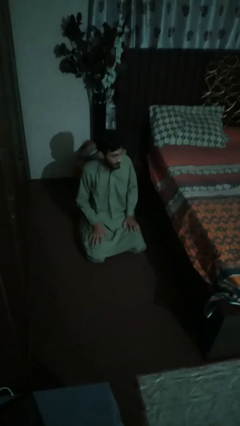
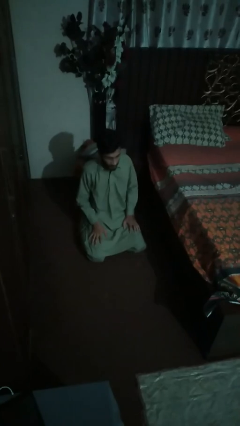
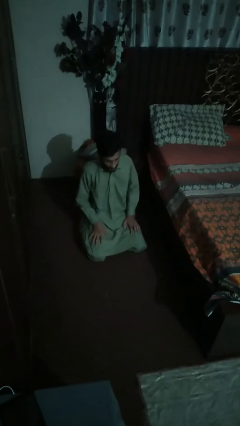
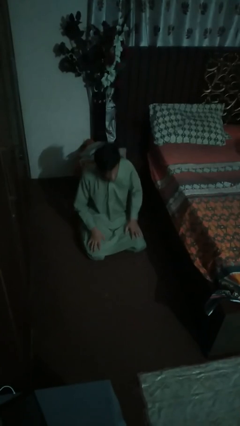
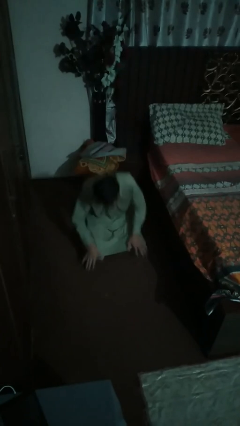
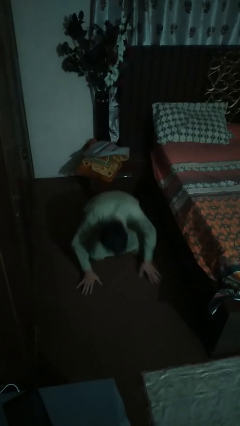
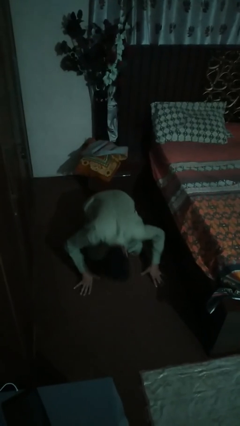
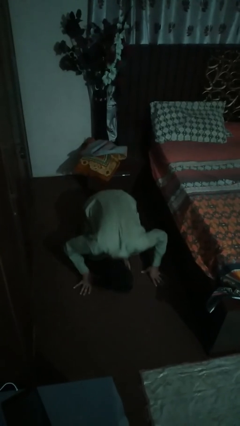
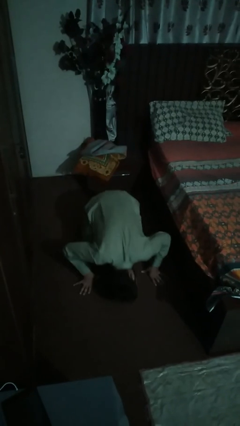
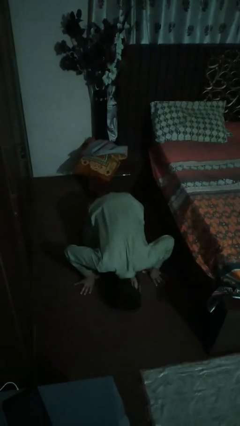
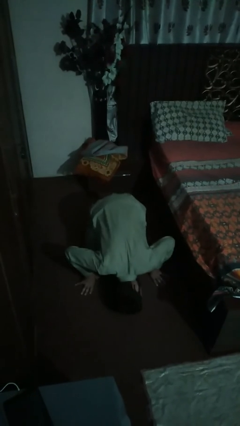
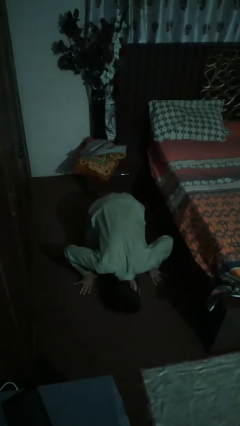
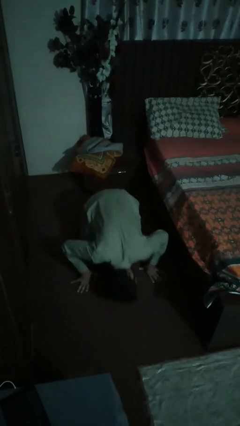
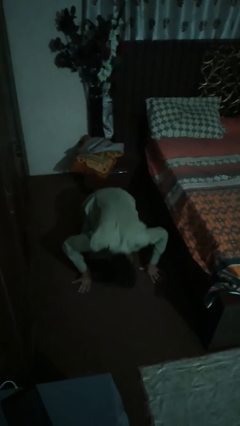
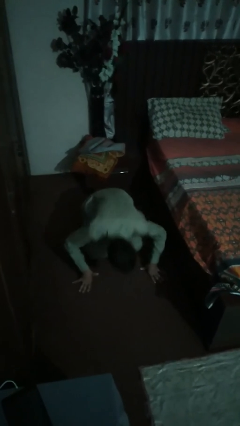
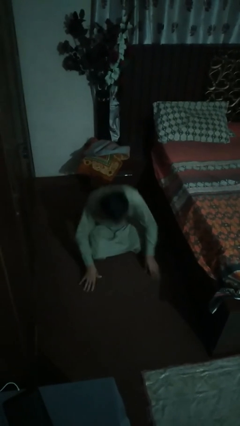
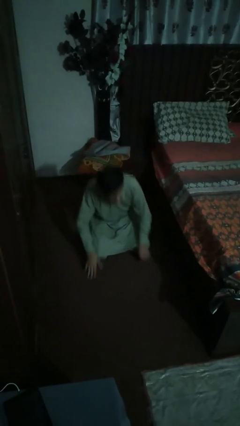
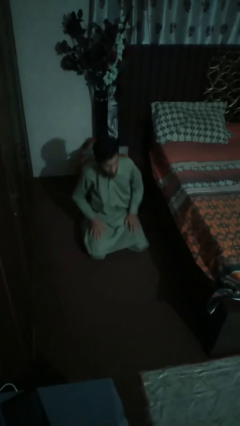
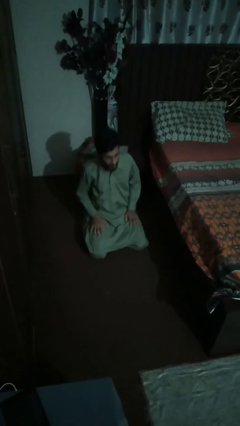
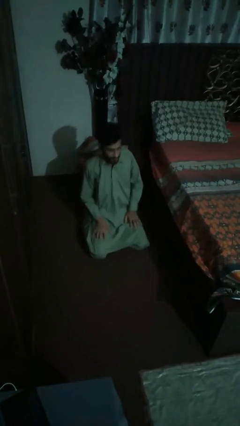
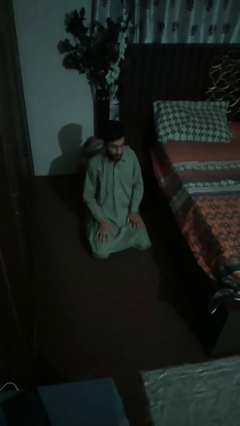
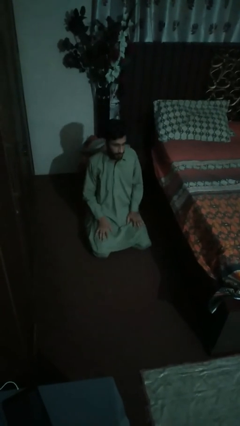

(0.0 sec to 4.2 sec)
person searches under bed

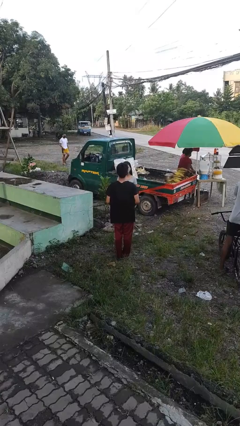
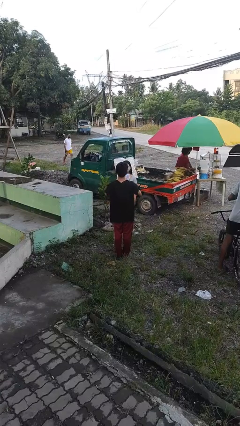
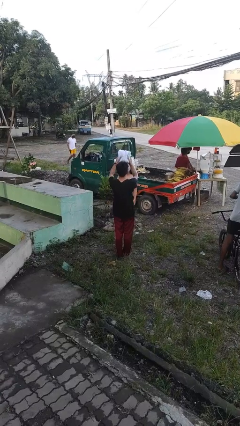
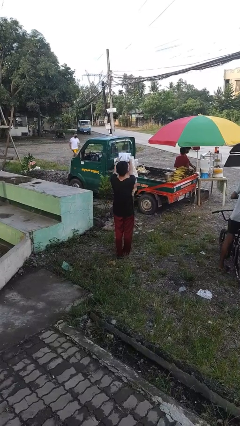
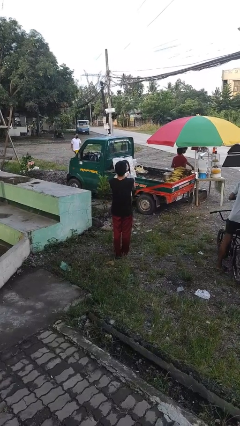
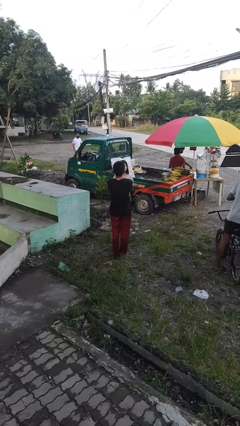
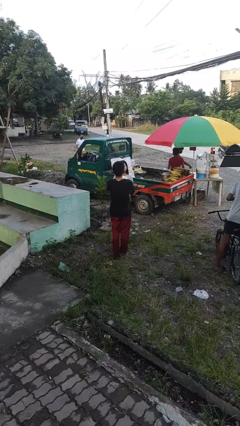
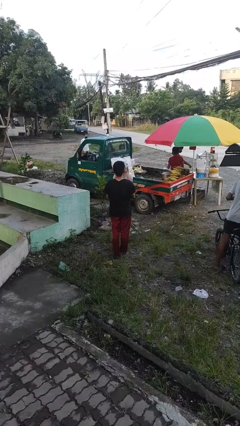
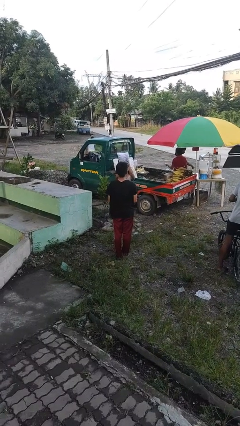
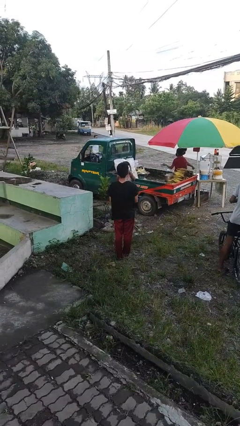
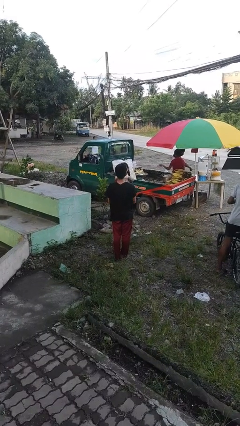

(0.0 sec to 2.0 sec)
person transfers object to person

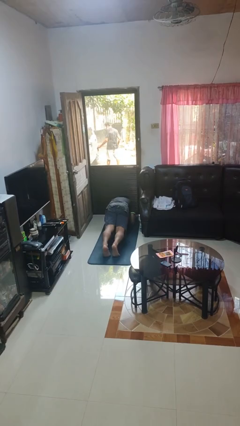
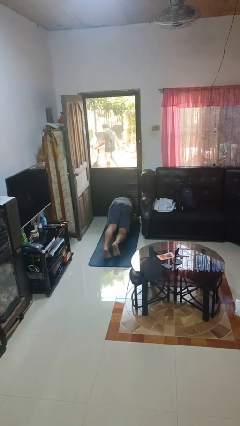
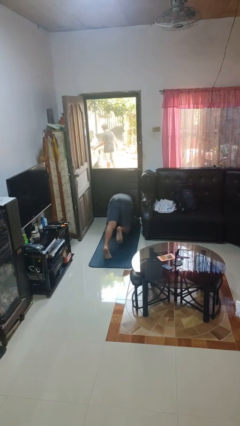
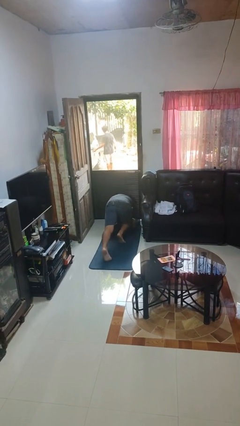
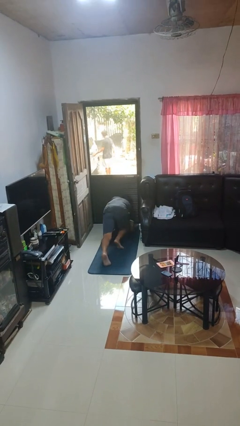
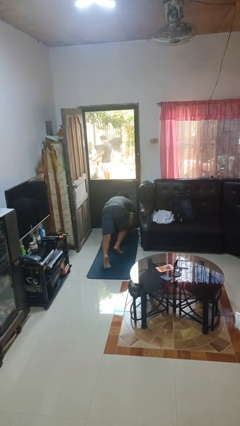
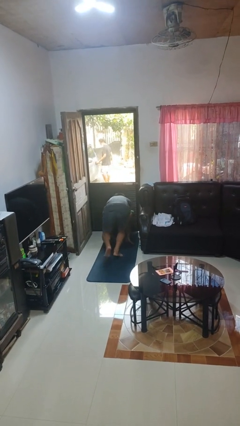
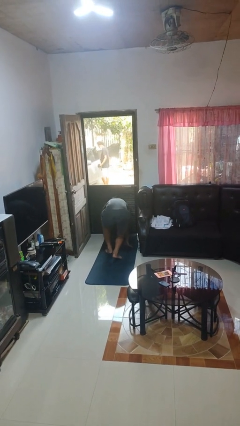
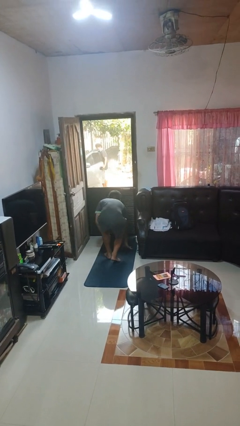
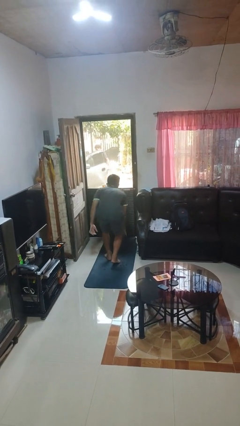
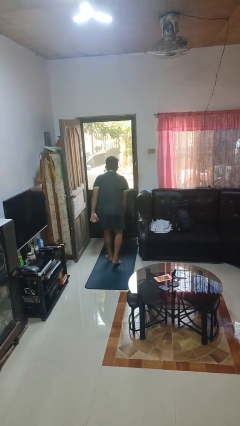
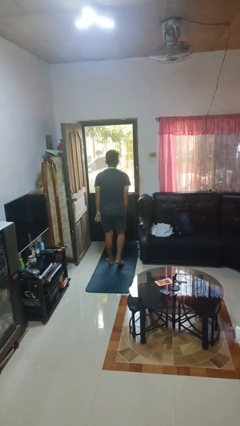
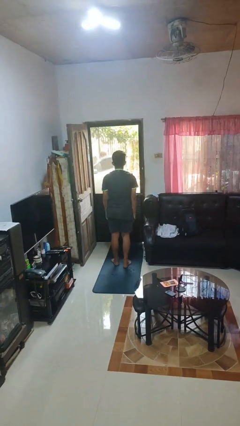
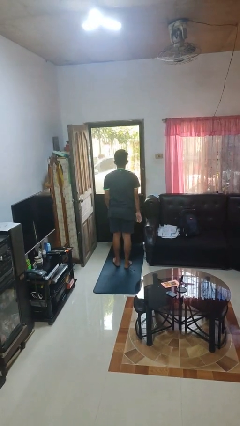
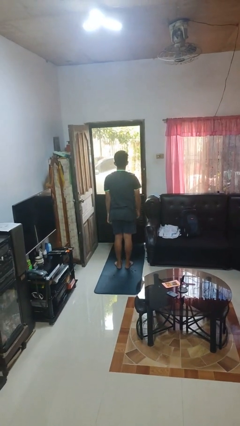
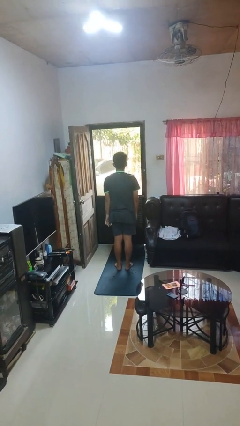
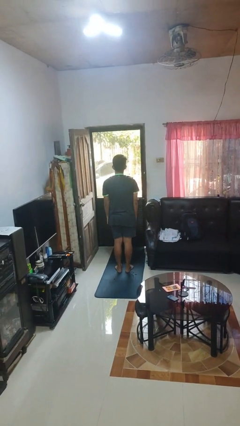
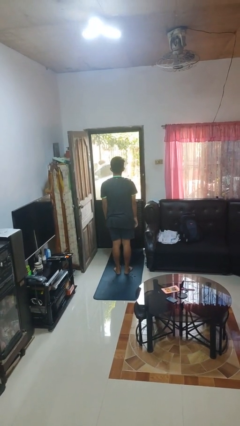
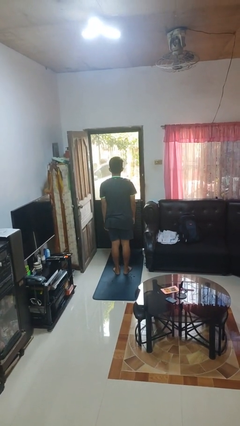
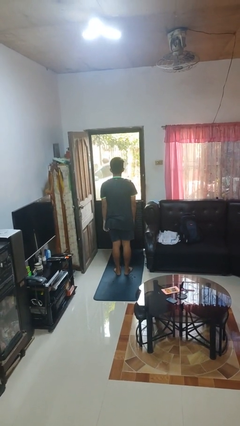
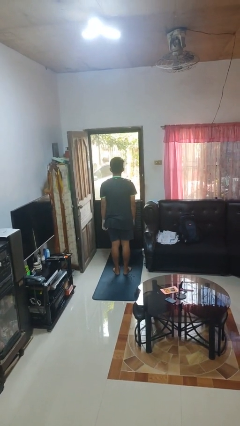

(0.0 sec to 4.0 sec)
person stands up from floor

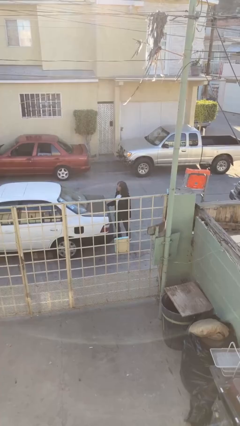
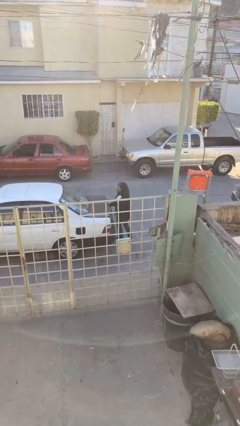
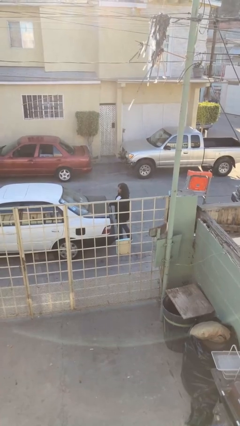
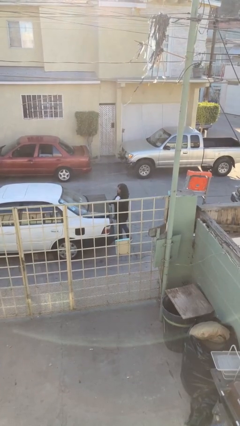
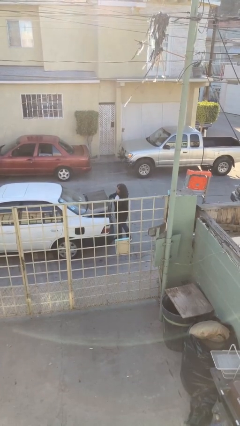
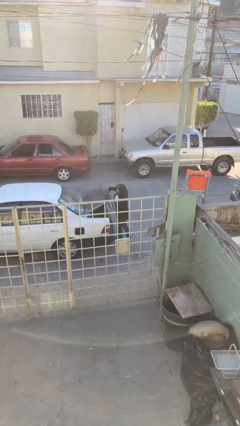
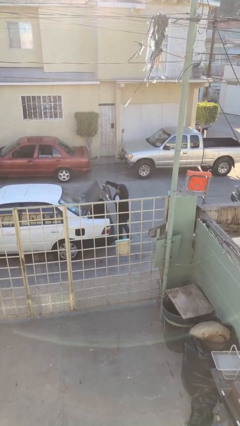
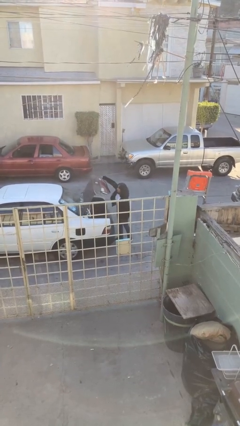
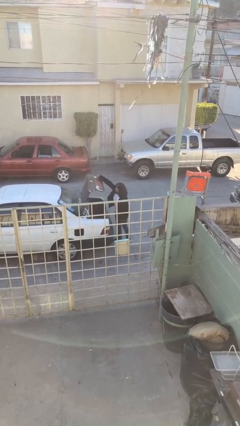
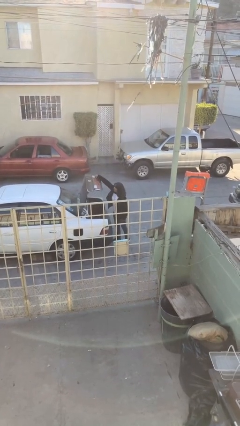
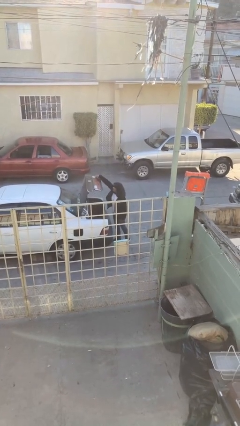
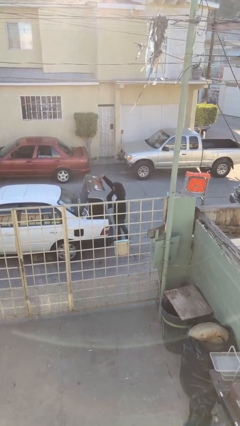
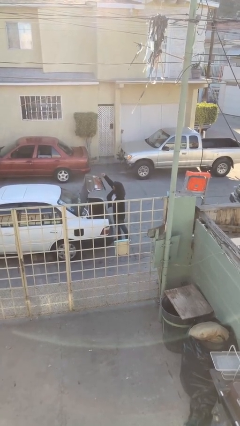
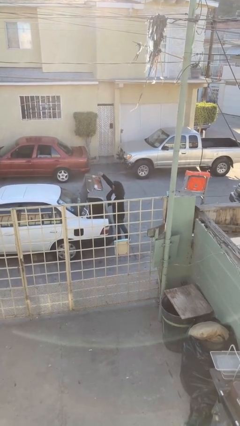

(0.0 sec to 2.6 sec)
person opens car trunk

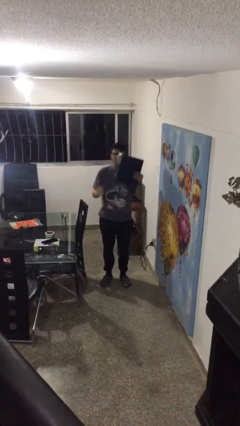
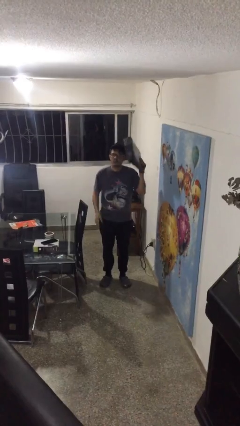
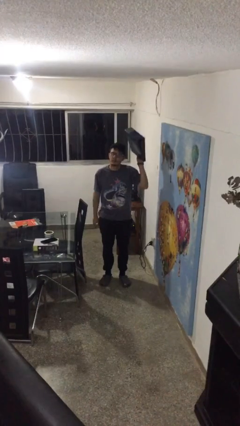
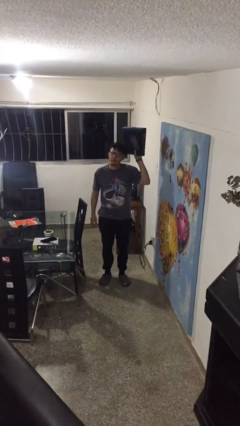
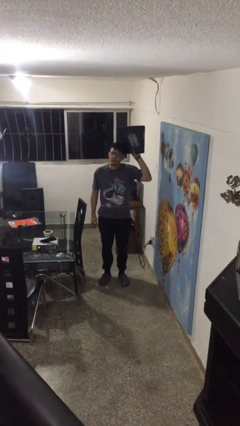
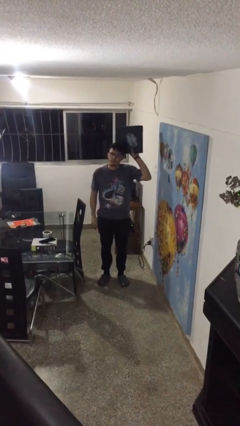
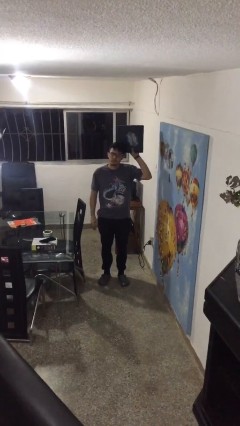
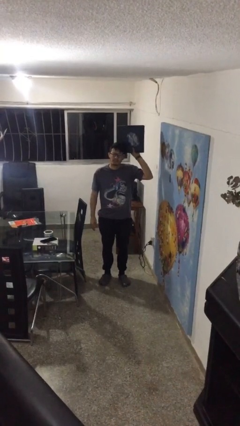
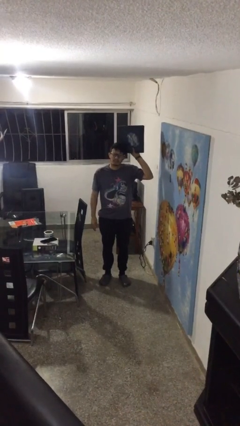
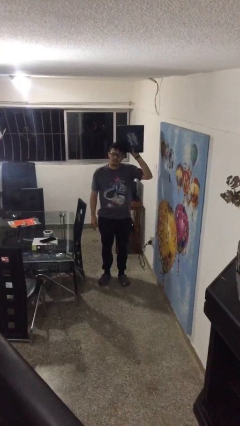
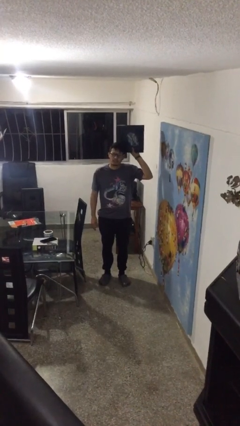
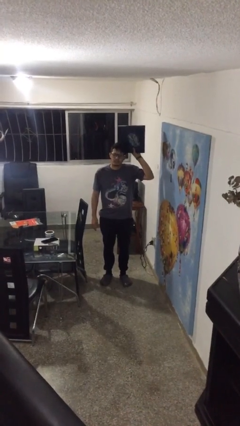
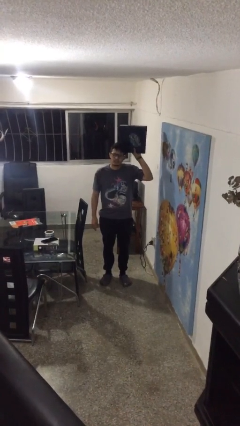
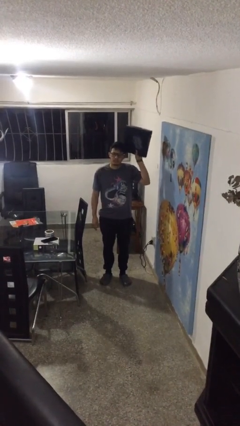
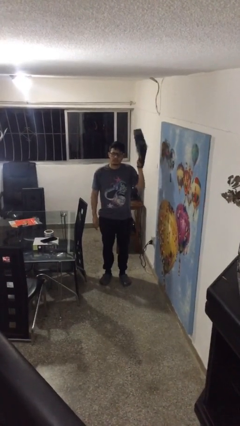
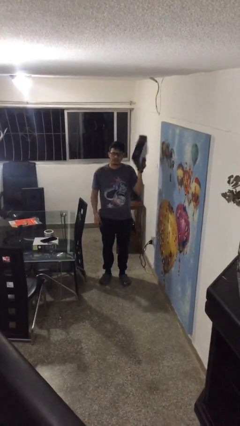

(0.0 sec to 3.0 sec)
person holds object above head

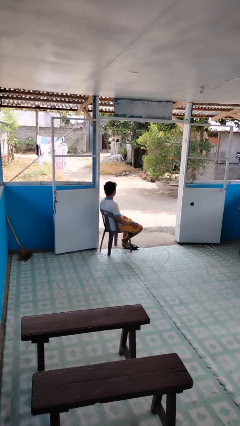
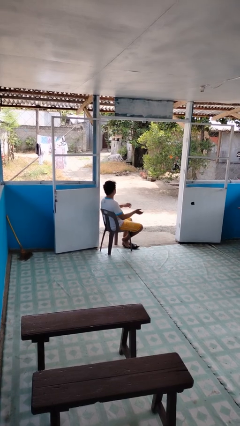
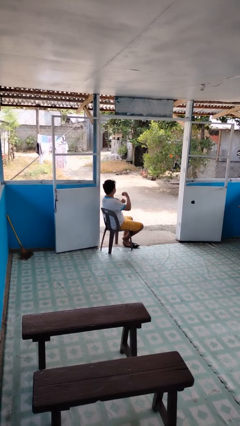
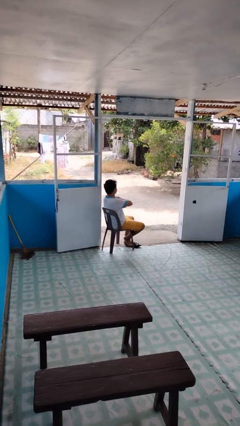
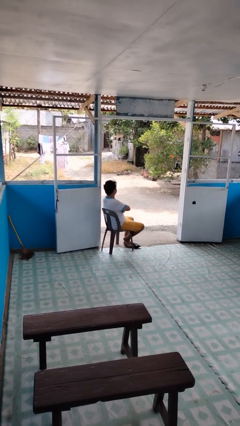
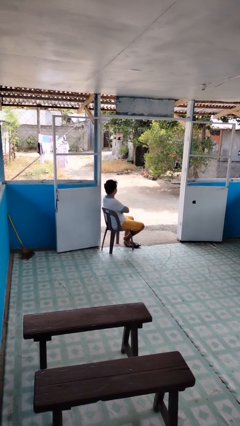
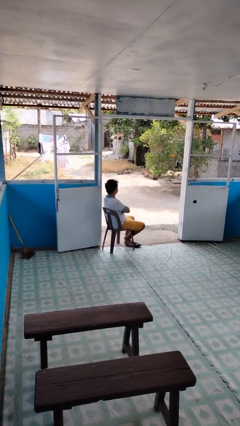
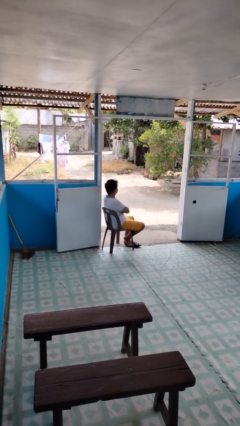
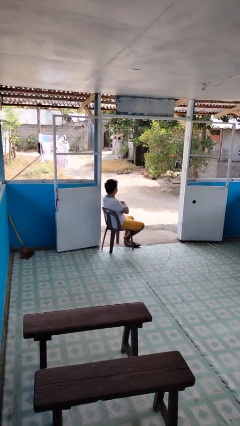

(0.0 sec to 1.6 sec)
person crosses arms
